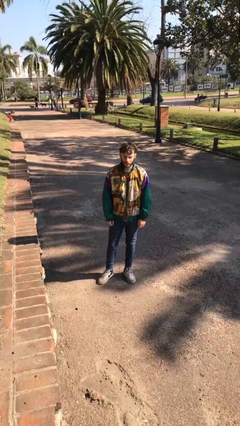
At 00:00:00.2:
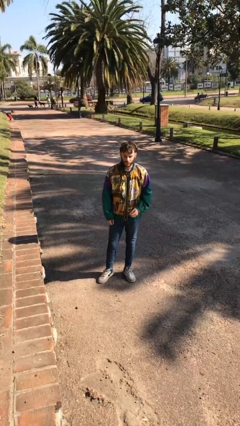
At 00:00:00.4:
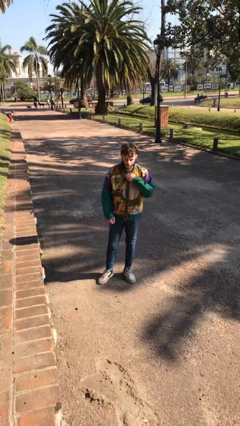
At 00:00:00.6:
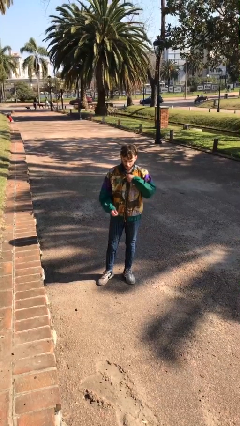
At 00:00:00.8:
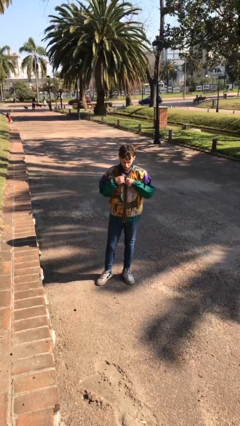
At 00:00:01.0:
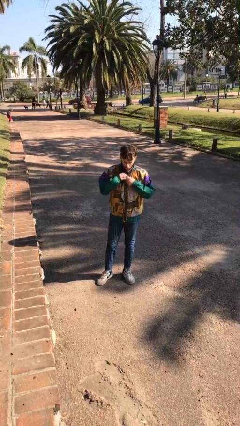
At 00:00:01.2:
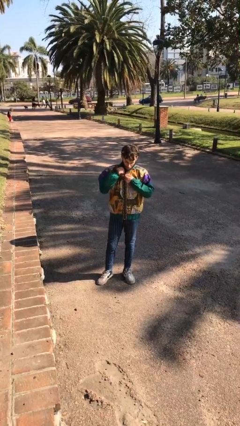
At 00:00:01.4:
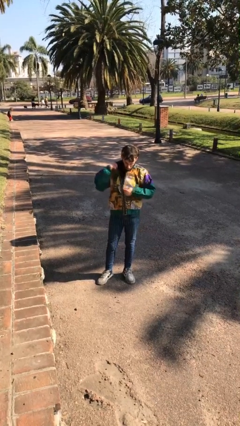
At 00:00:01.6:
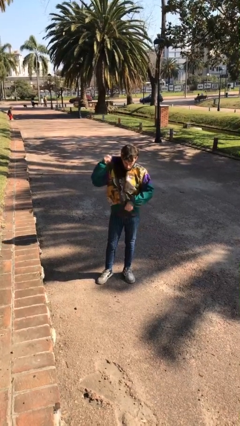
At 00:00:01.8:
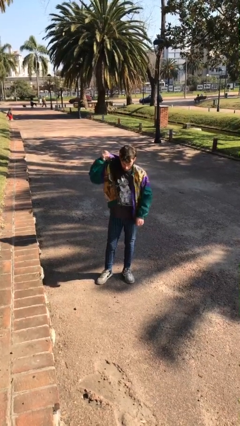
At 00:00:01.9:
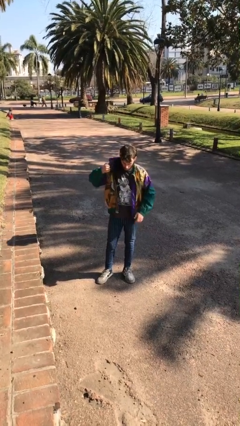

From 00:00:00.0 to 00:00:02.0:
person unzips jacket

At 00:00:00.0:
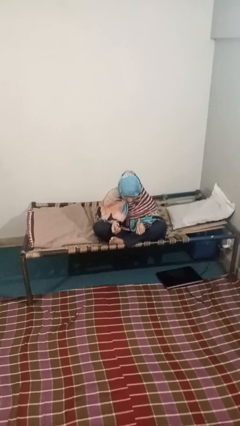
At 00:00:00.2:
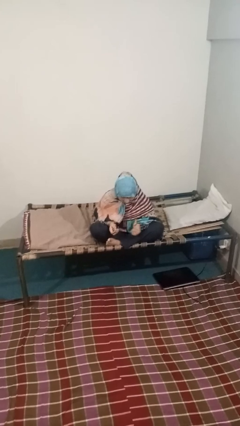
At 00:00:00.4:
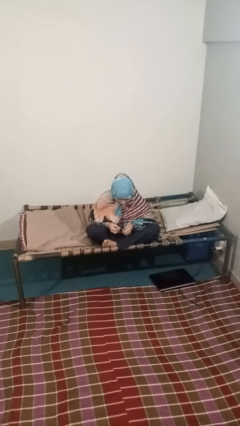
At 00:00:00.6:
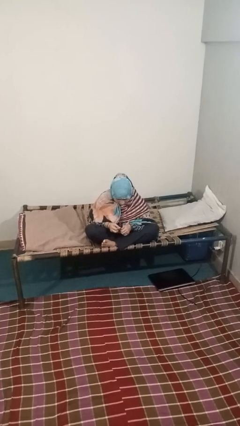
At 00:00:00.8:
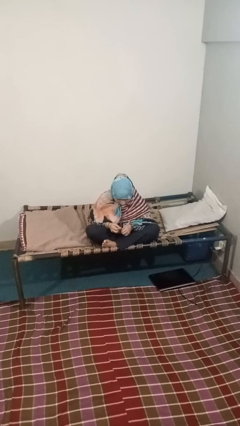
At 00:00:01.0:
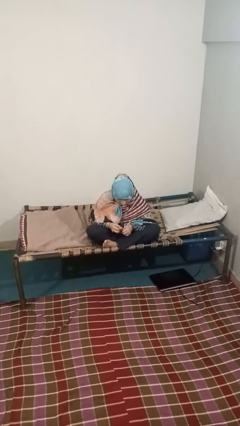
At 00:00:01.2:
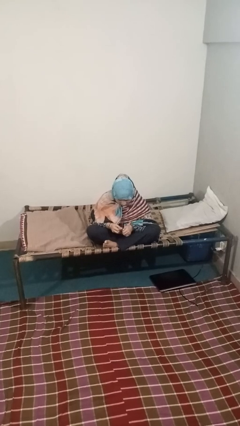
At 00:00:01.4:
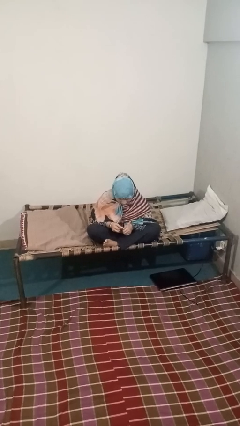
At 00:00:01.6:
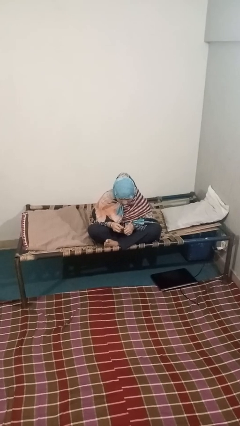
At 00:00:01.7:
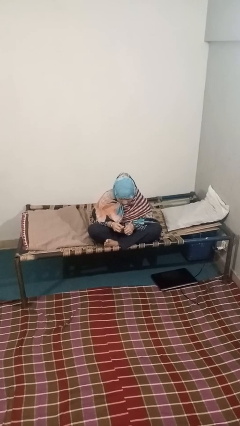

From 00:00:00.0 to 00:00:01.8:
person files fingernails

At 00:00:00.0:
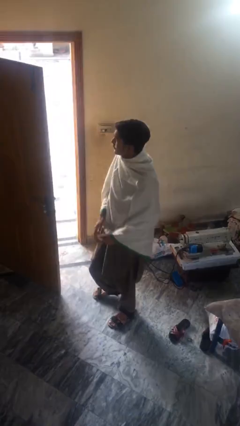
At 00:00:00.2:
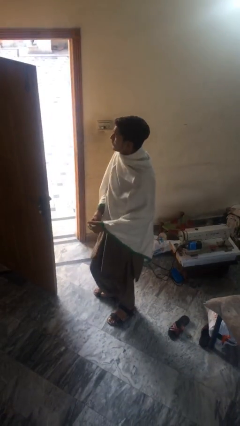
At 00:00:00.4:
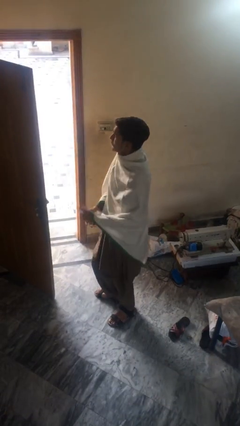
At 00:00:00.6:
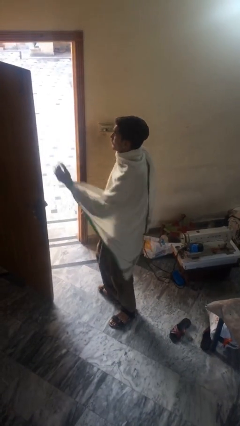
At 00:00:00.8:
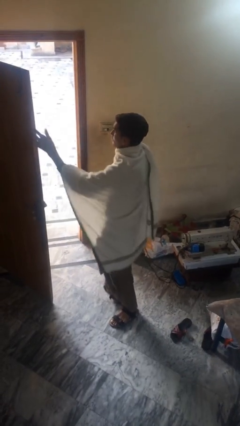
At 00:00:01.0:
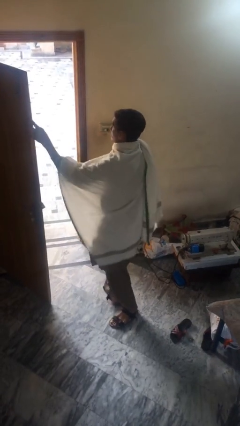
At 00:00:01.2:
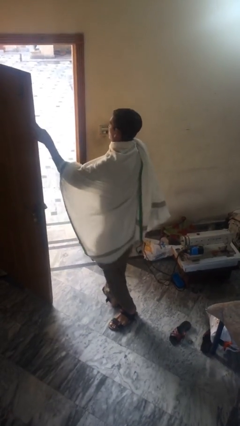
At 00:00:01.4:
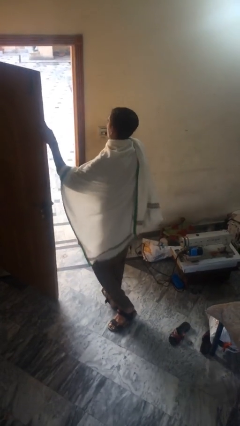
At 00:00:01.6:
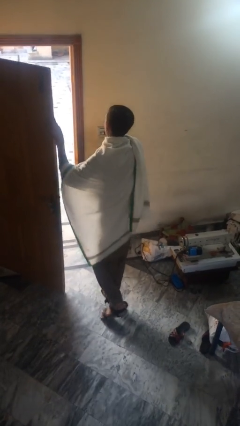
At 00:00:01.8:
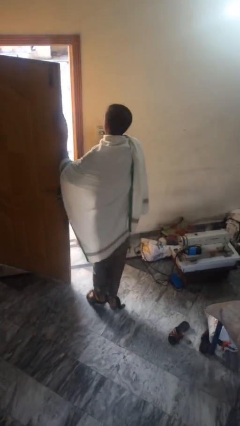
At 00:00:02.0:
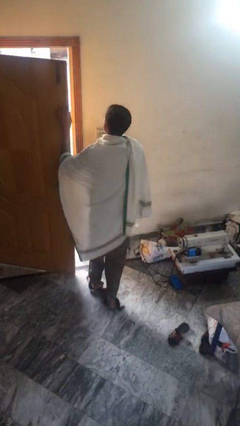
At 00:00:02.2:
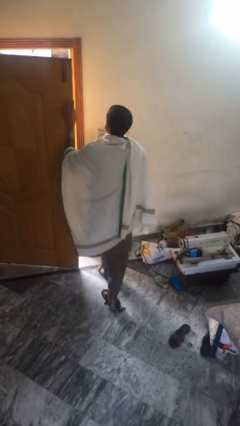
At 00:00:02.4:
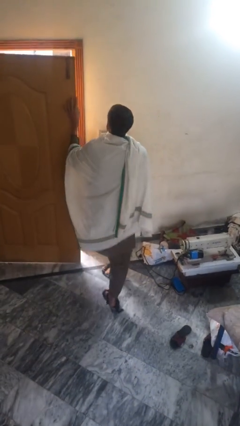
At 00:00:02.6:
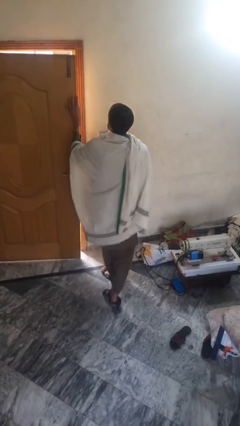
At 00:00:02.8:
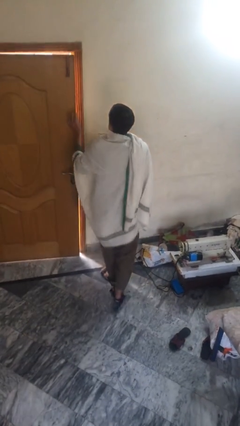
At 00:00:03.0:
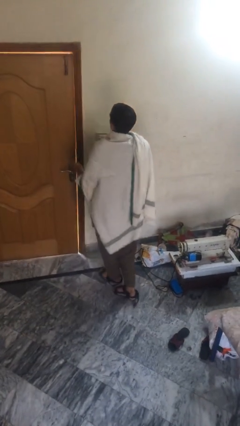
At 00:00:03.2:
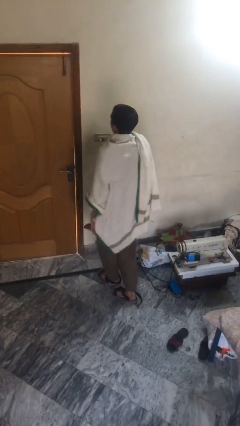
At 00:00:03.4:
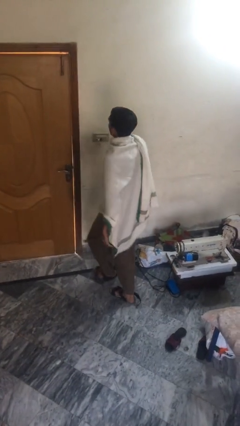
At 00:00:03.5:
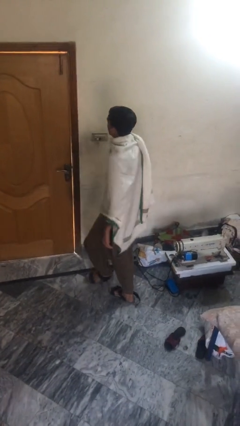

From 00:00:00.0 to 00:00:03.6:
person closes facility door

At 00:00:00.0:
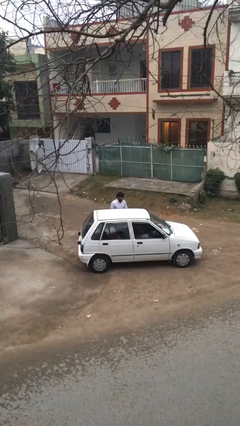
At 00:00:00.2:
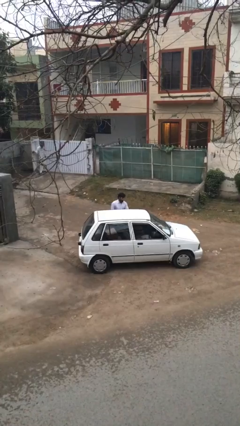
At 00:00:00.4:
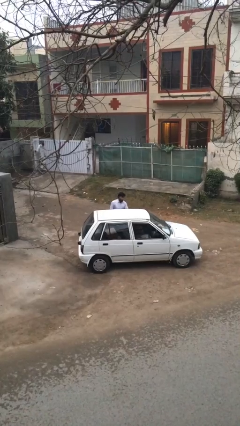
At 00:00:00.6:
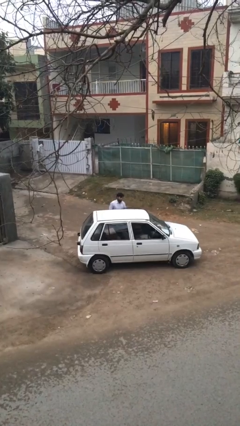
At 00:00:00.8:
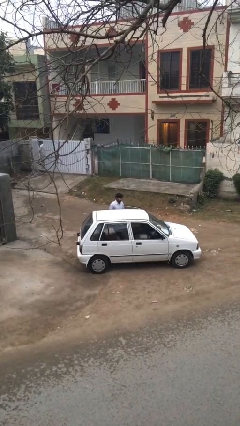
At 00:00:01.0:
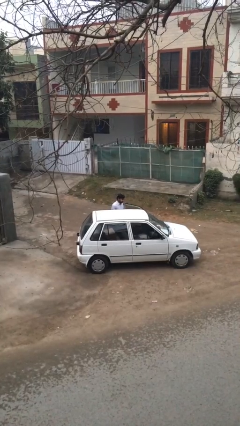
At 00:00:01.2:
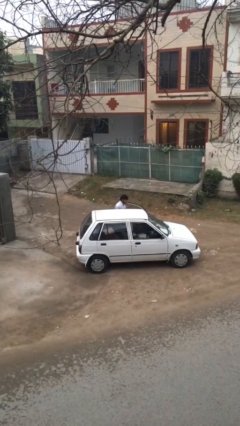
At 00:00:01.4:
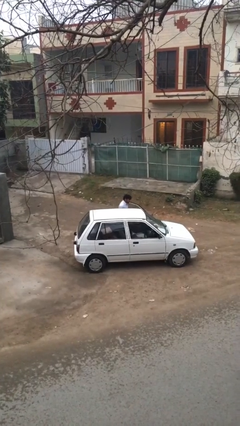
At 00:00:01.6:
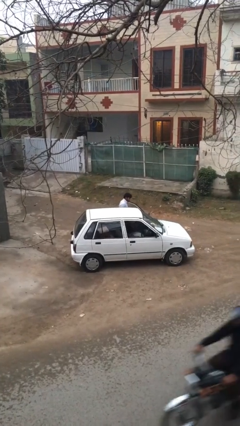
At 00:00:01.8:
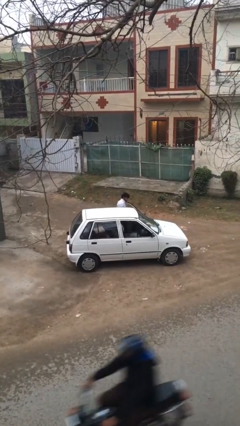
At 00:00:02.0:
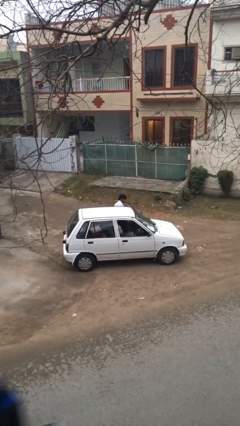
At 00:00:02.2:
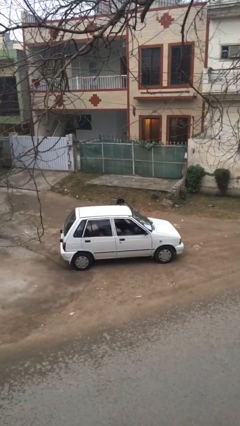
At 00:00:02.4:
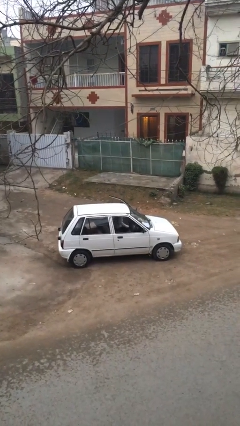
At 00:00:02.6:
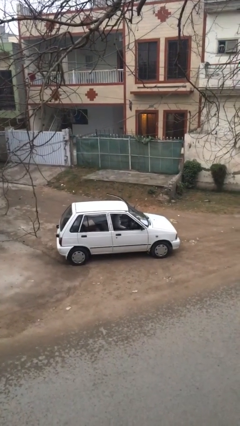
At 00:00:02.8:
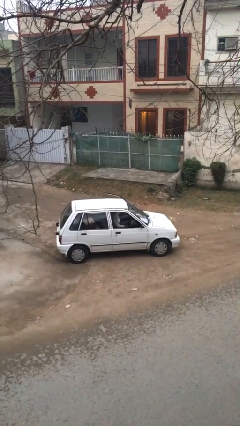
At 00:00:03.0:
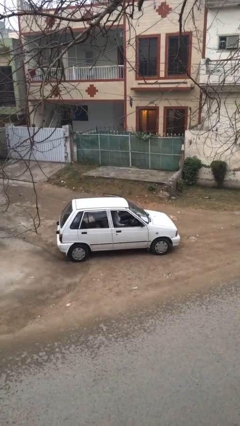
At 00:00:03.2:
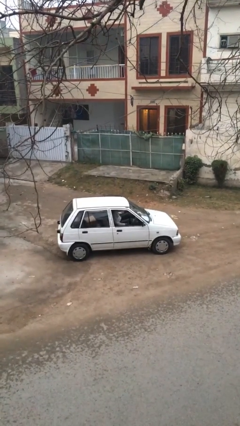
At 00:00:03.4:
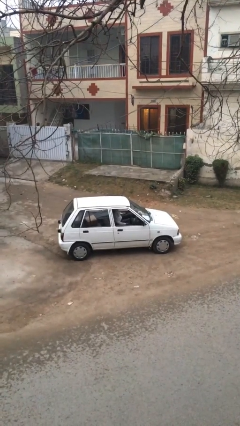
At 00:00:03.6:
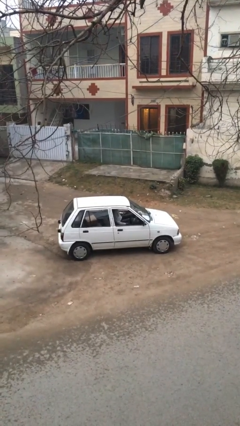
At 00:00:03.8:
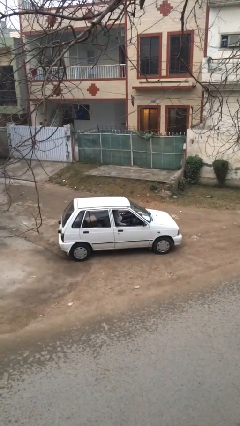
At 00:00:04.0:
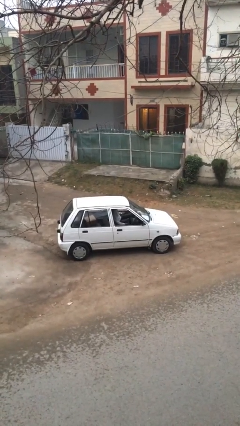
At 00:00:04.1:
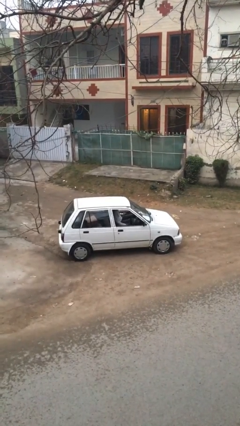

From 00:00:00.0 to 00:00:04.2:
person enters car

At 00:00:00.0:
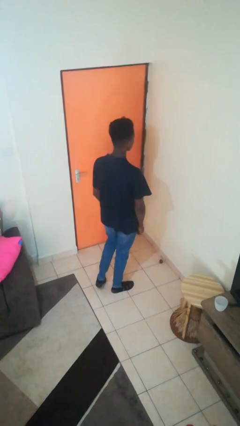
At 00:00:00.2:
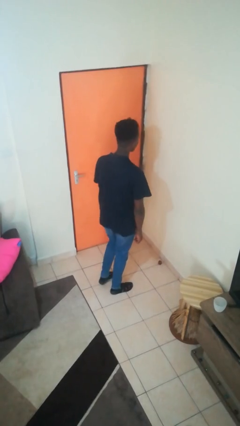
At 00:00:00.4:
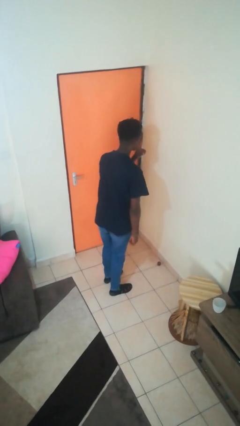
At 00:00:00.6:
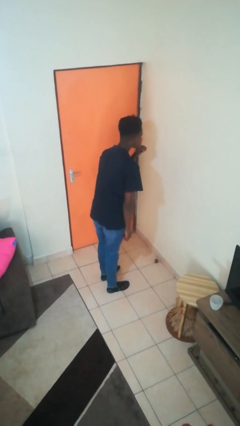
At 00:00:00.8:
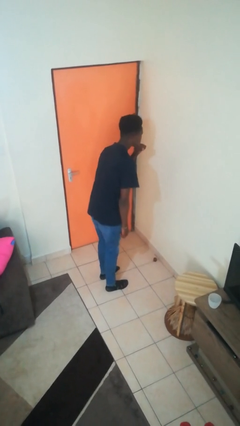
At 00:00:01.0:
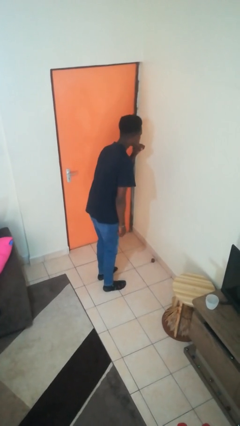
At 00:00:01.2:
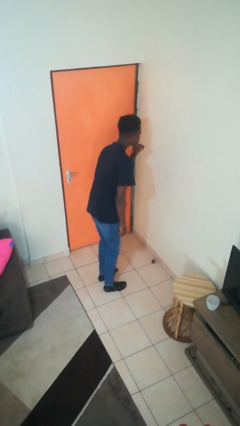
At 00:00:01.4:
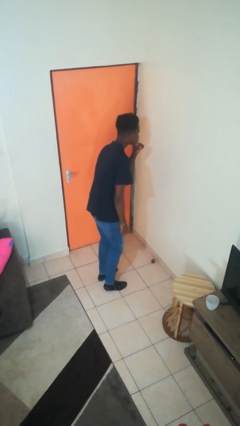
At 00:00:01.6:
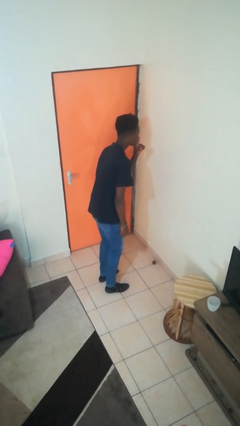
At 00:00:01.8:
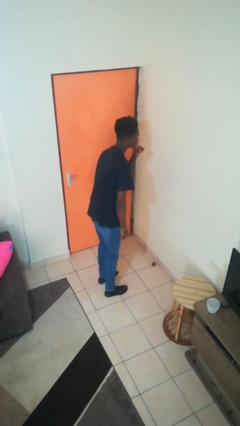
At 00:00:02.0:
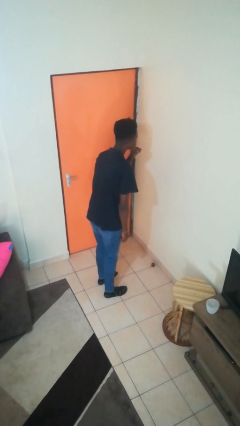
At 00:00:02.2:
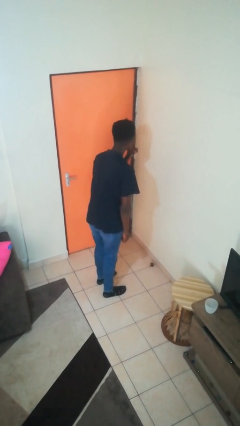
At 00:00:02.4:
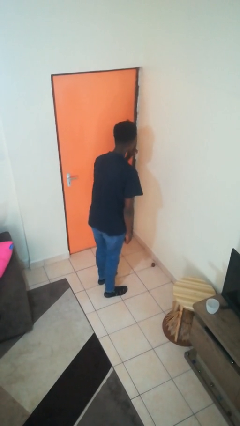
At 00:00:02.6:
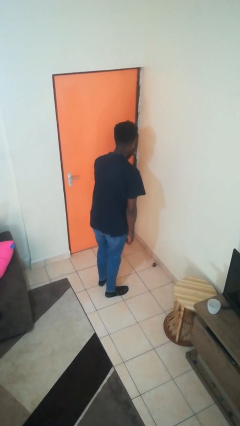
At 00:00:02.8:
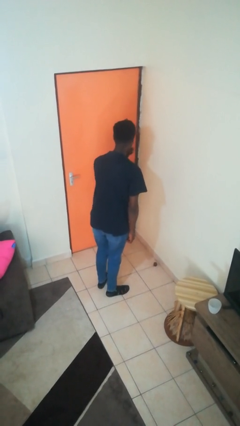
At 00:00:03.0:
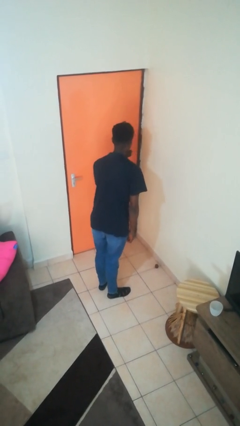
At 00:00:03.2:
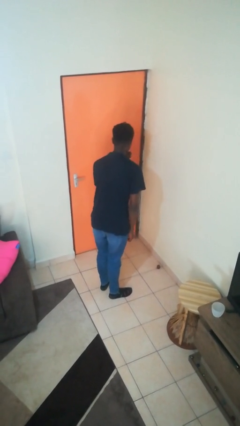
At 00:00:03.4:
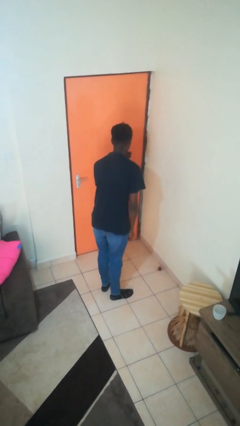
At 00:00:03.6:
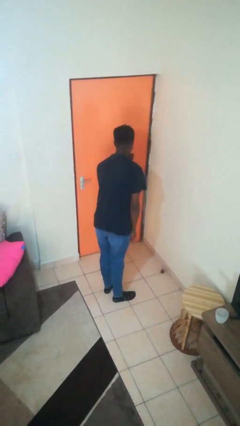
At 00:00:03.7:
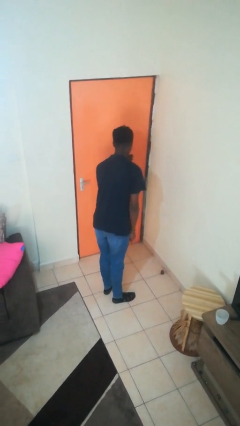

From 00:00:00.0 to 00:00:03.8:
person gestures be quiet

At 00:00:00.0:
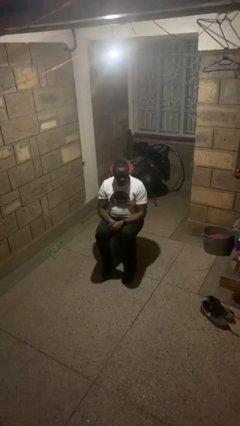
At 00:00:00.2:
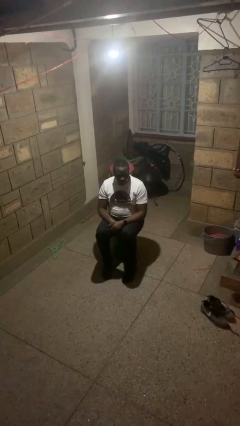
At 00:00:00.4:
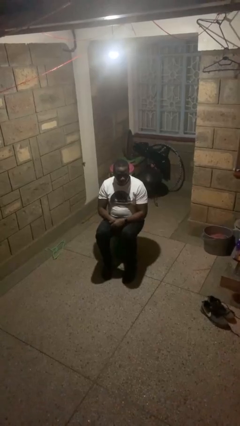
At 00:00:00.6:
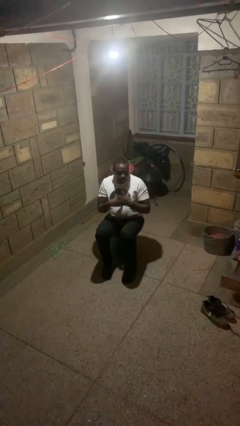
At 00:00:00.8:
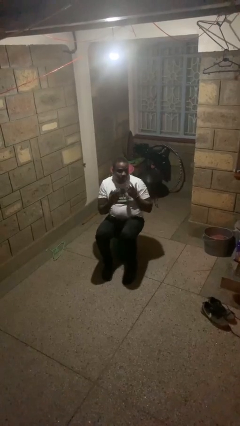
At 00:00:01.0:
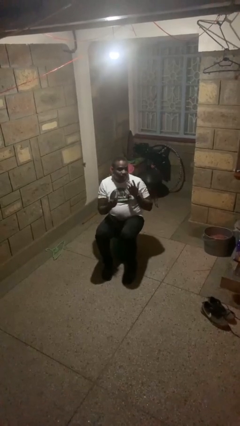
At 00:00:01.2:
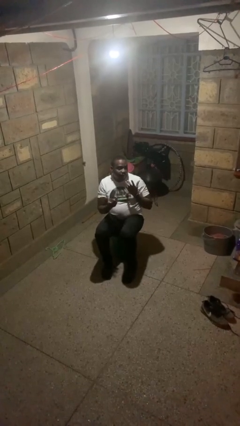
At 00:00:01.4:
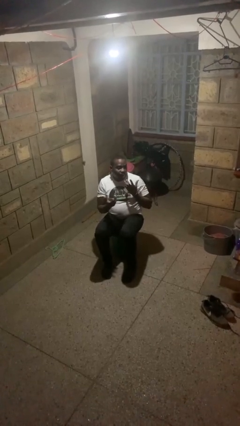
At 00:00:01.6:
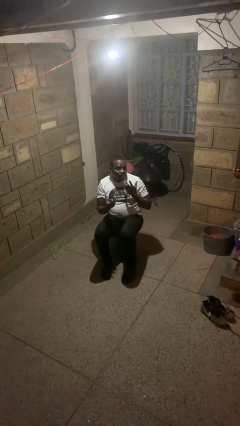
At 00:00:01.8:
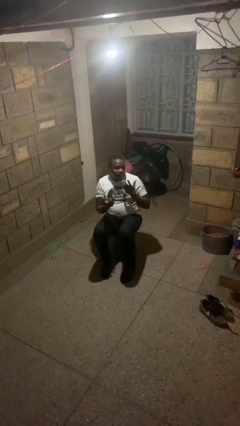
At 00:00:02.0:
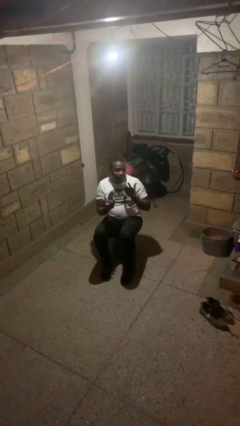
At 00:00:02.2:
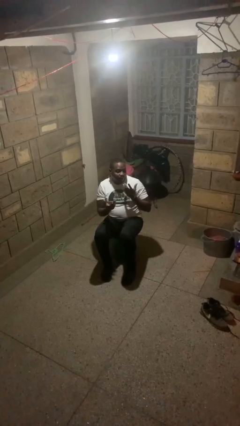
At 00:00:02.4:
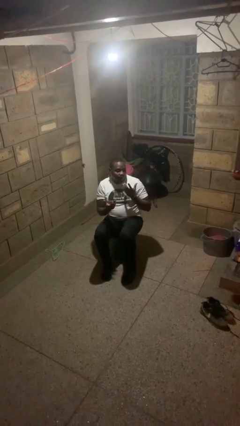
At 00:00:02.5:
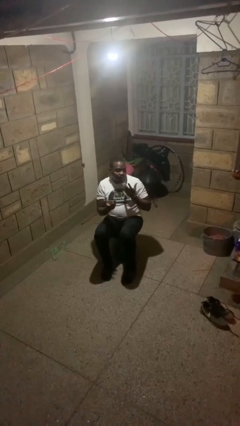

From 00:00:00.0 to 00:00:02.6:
person shrugs
